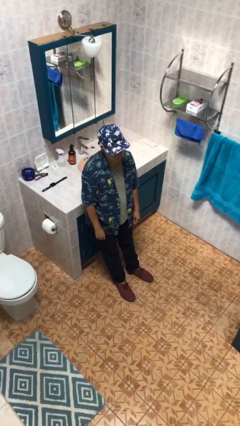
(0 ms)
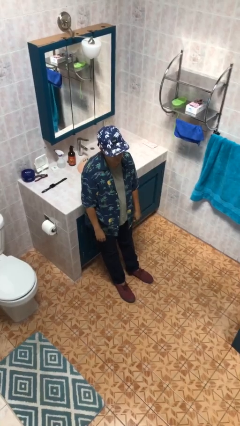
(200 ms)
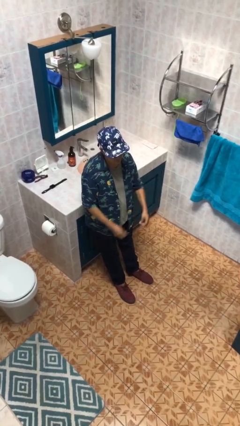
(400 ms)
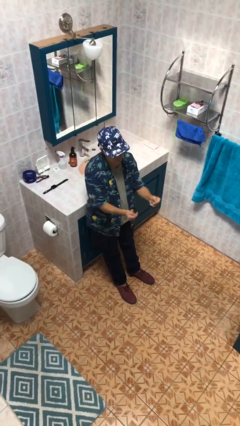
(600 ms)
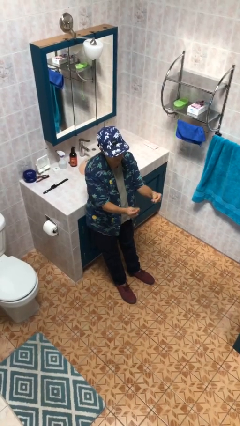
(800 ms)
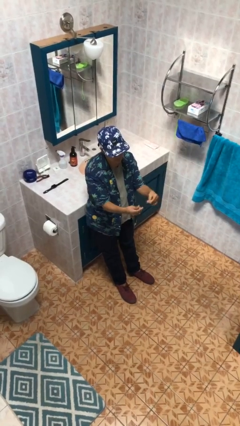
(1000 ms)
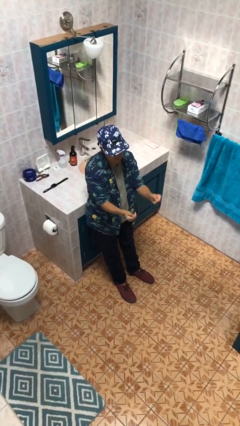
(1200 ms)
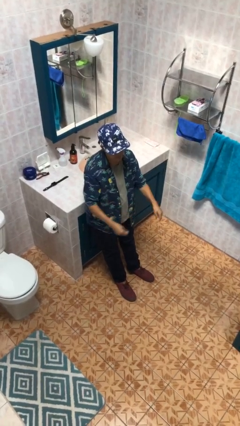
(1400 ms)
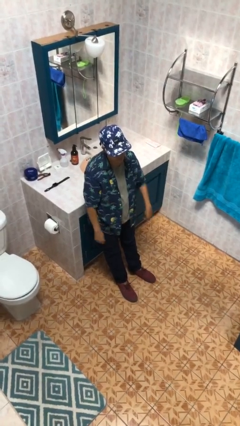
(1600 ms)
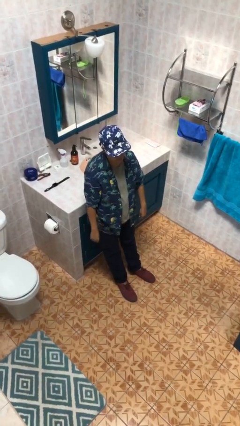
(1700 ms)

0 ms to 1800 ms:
person snaps fingers

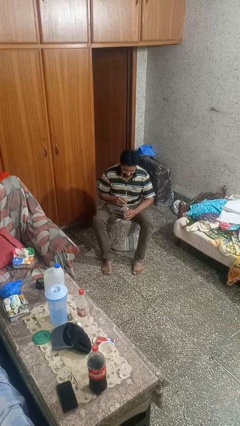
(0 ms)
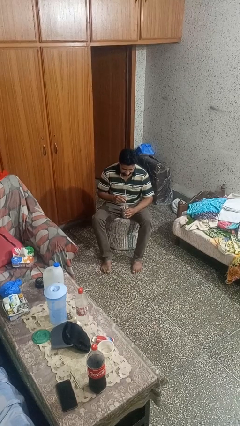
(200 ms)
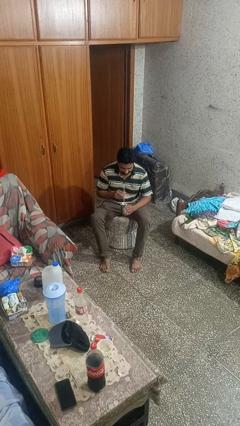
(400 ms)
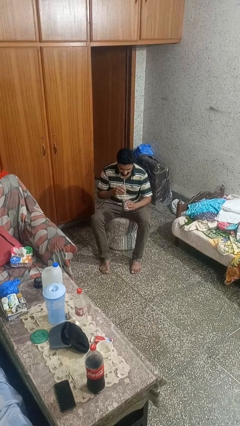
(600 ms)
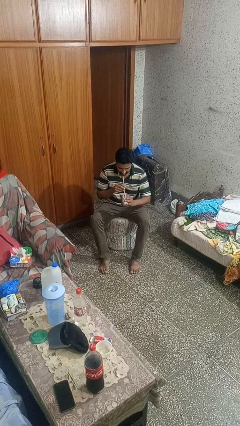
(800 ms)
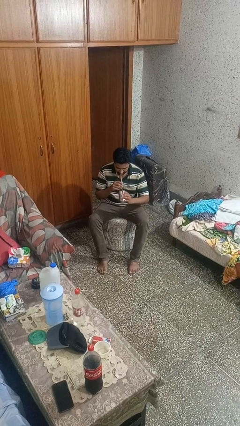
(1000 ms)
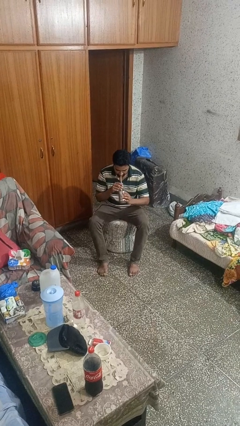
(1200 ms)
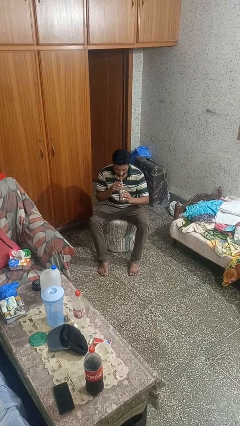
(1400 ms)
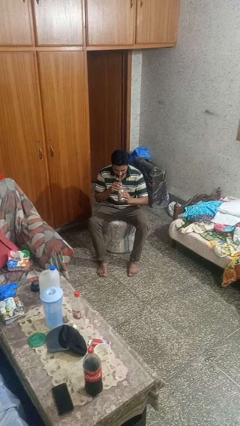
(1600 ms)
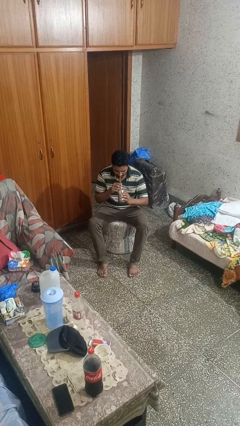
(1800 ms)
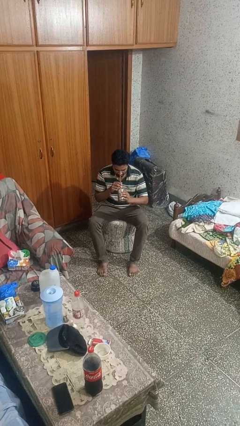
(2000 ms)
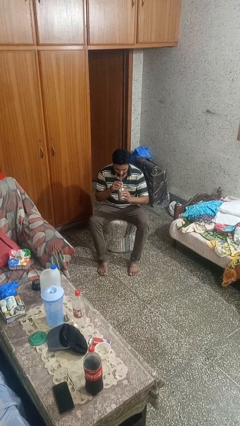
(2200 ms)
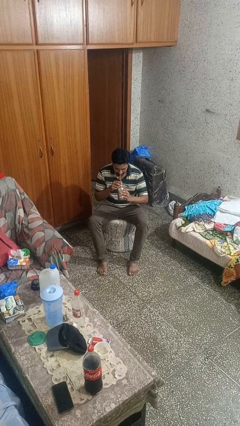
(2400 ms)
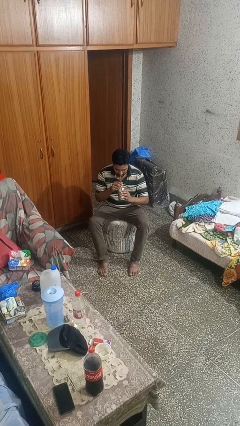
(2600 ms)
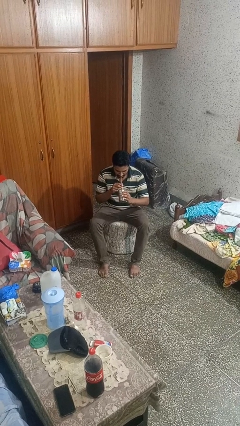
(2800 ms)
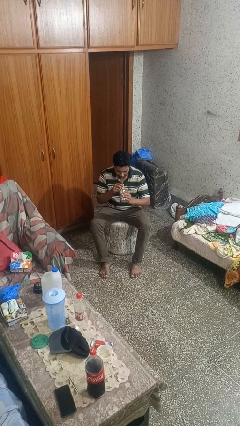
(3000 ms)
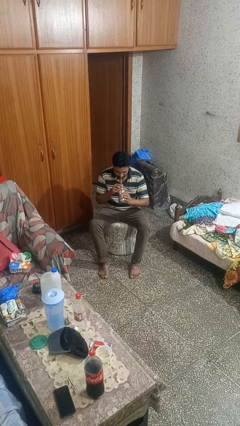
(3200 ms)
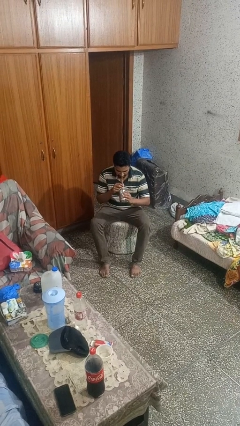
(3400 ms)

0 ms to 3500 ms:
person drinks from straw

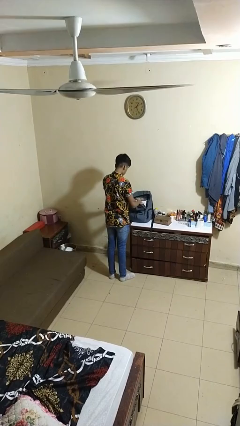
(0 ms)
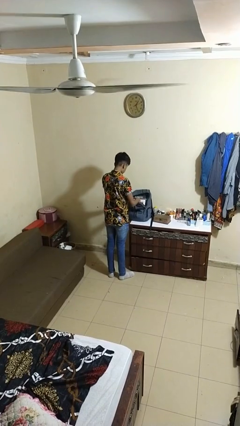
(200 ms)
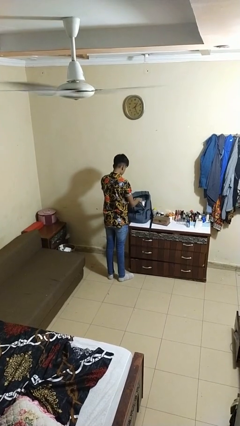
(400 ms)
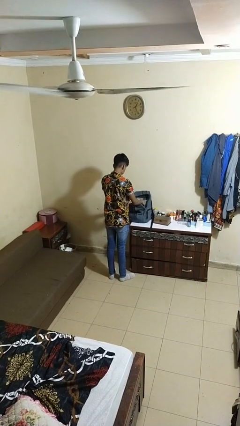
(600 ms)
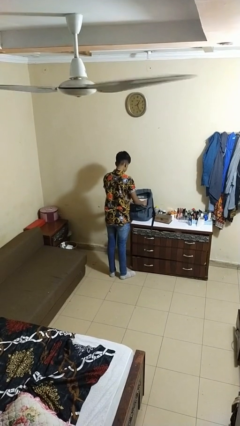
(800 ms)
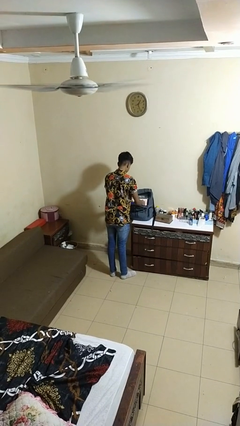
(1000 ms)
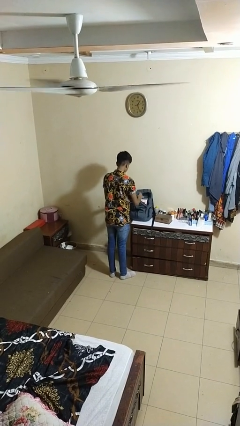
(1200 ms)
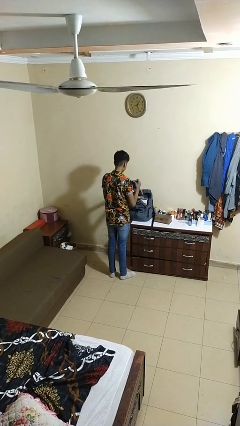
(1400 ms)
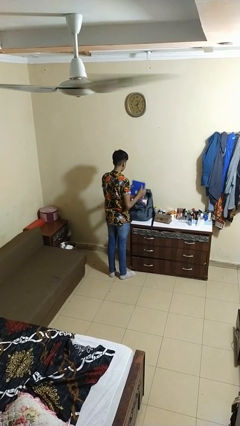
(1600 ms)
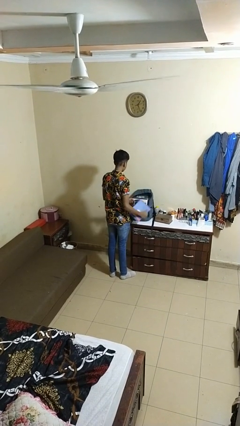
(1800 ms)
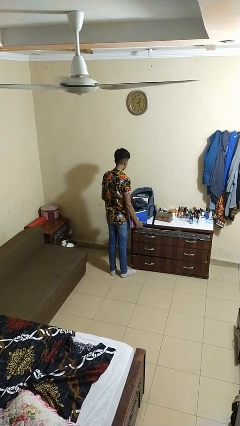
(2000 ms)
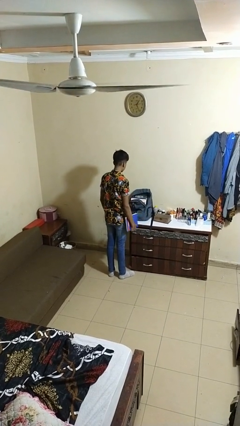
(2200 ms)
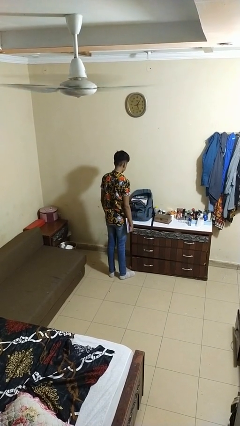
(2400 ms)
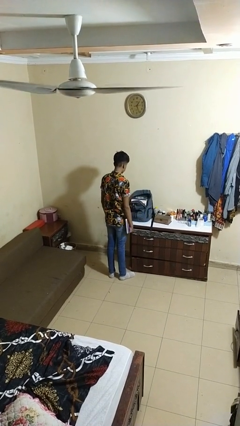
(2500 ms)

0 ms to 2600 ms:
person takes object from backpack

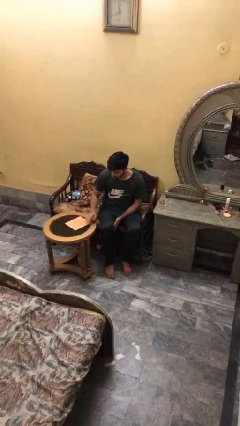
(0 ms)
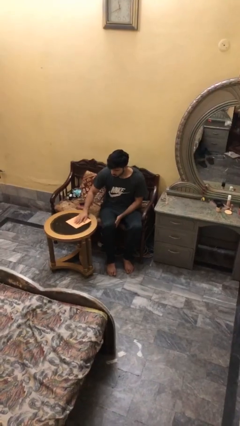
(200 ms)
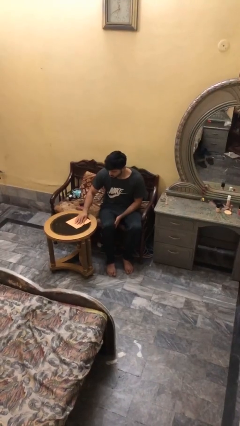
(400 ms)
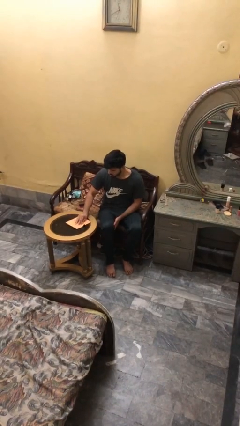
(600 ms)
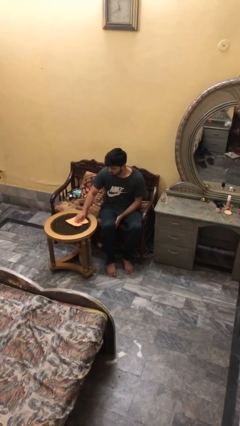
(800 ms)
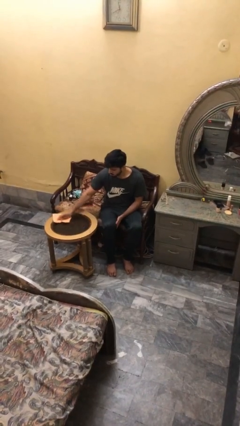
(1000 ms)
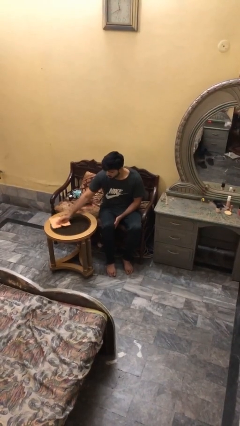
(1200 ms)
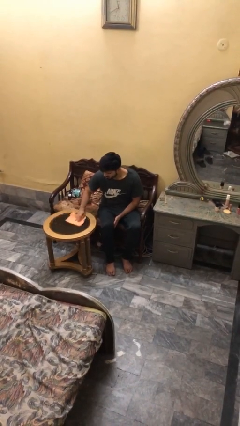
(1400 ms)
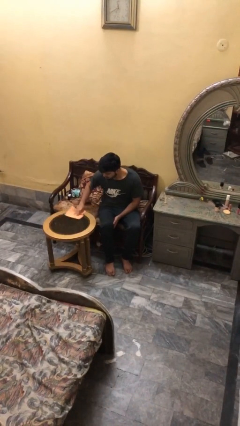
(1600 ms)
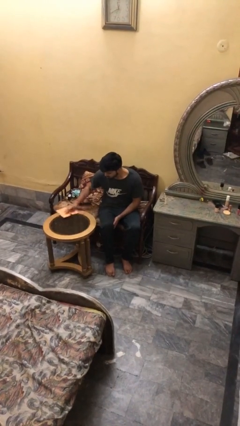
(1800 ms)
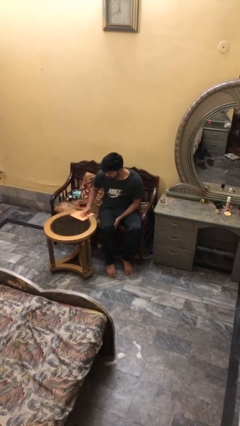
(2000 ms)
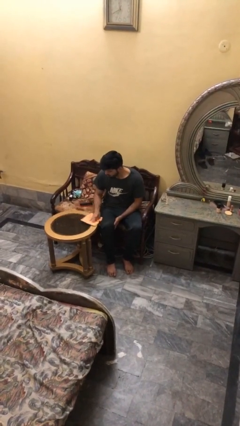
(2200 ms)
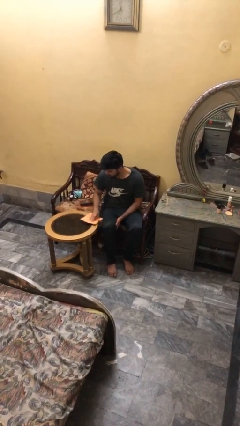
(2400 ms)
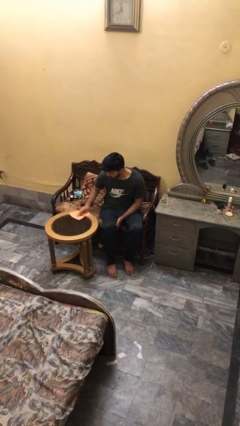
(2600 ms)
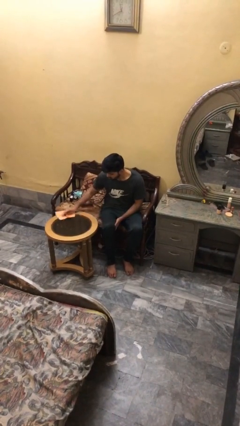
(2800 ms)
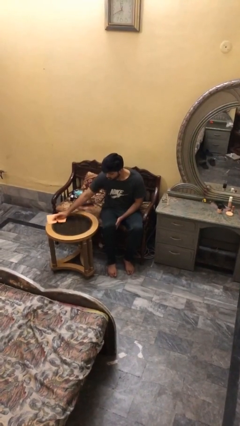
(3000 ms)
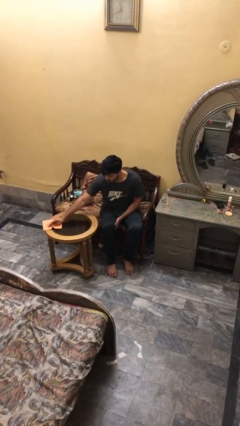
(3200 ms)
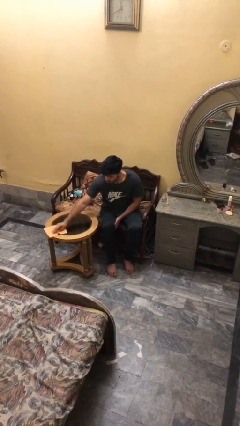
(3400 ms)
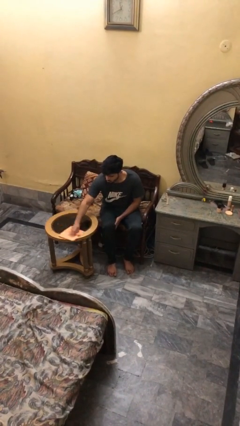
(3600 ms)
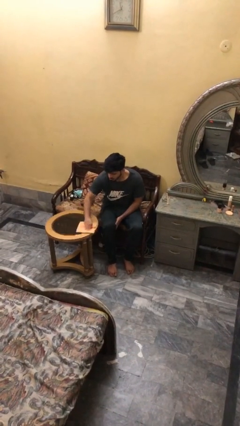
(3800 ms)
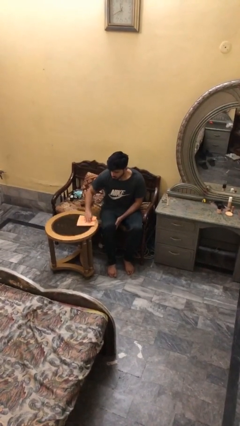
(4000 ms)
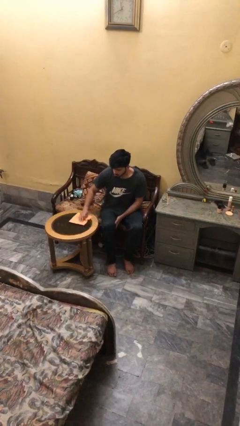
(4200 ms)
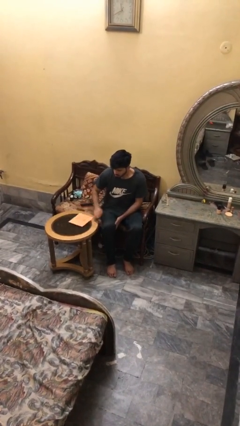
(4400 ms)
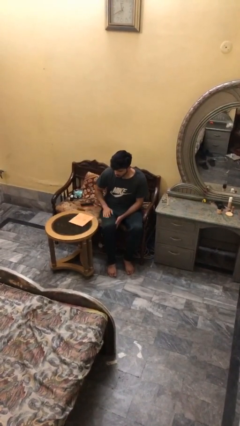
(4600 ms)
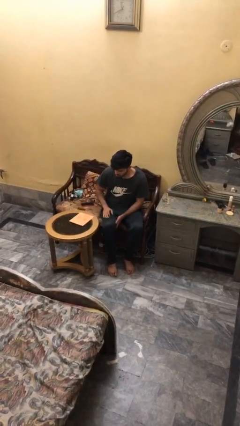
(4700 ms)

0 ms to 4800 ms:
person cleans table with rag

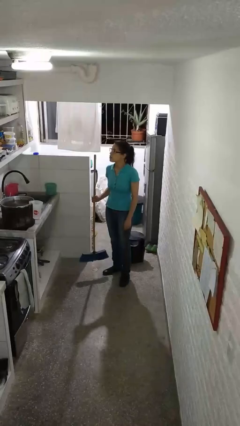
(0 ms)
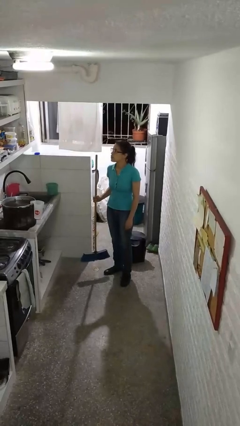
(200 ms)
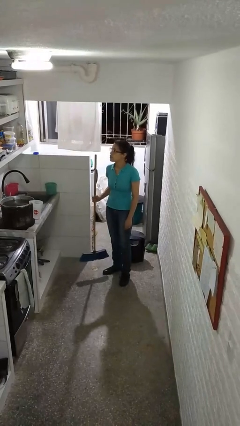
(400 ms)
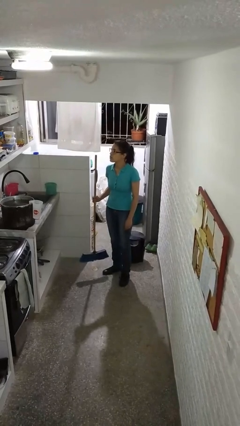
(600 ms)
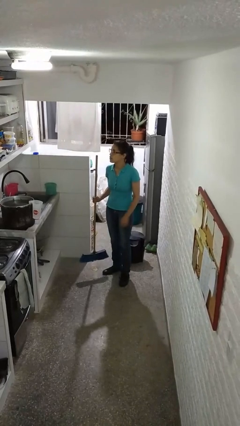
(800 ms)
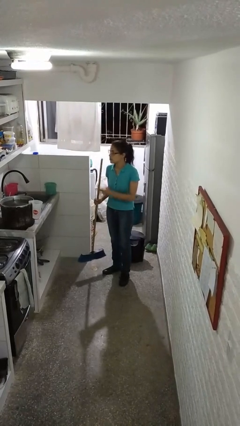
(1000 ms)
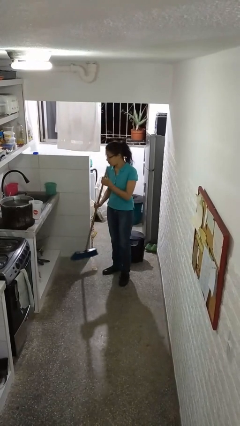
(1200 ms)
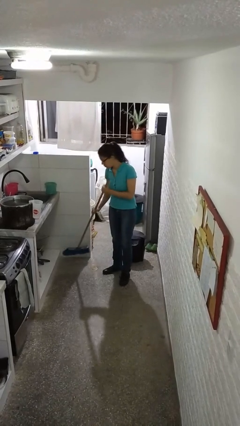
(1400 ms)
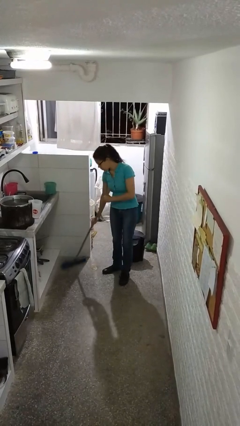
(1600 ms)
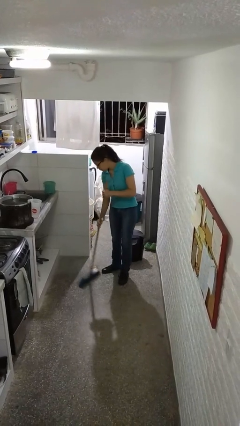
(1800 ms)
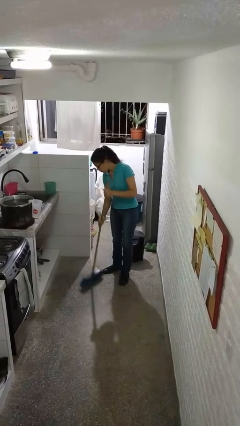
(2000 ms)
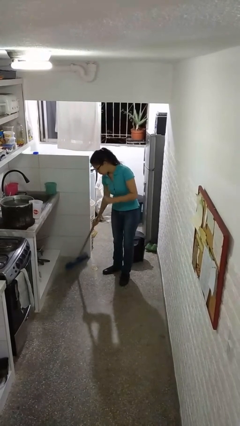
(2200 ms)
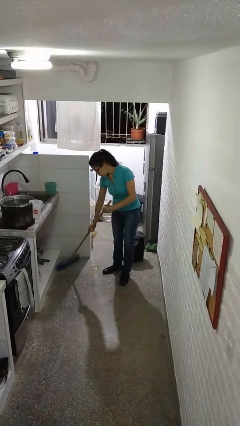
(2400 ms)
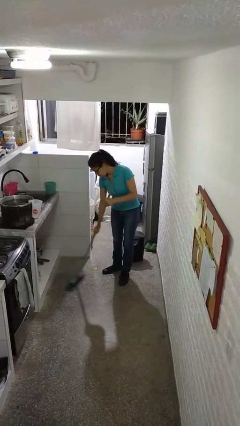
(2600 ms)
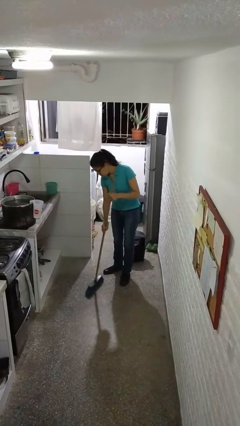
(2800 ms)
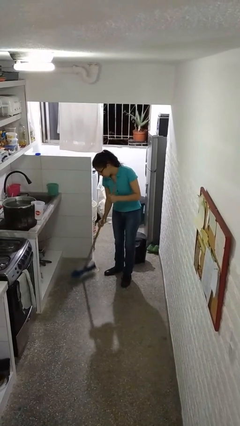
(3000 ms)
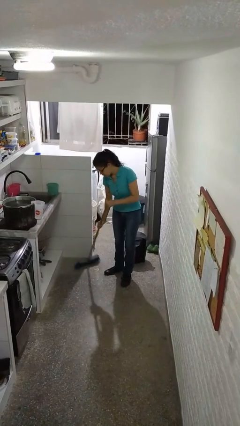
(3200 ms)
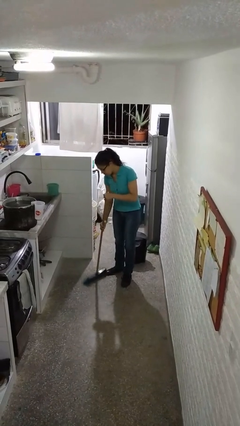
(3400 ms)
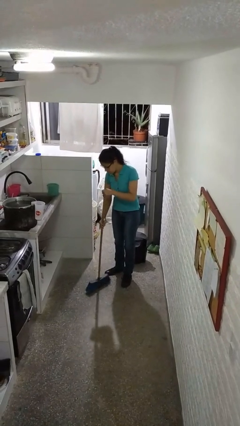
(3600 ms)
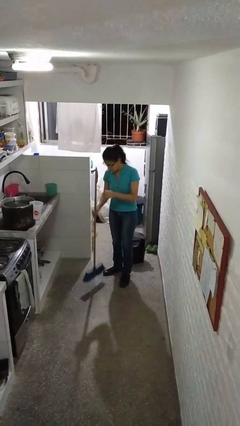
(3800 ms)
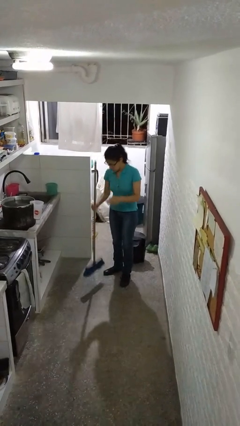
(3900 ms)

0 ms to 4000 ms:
person sweeps floor

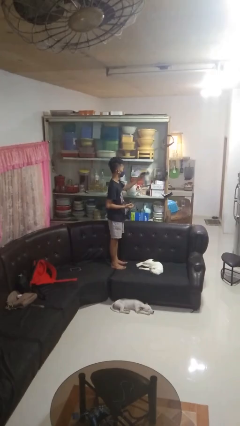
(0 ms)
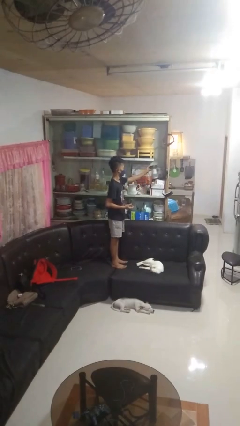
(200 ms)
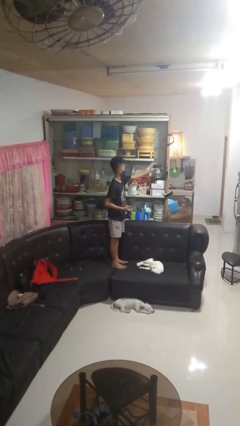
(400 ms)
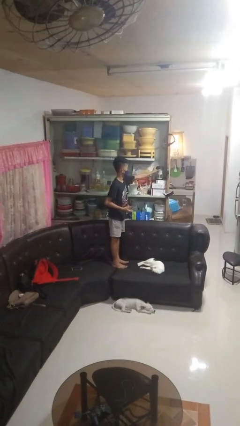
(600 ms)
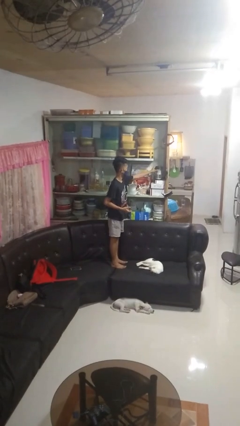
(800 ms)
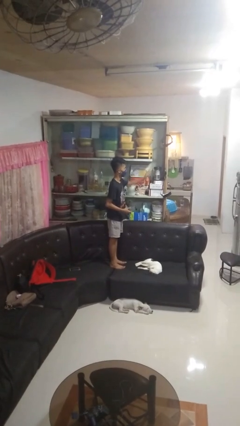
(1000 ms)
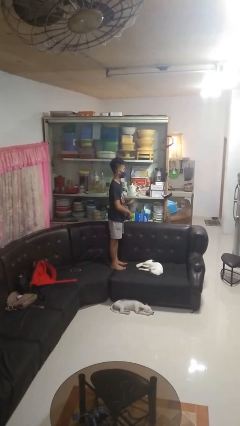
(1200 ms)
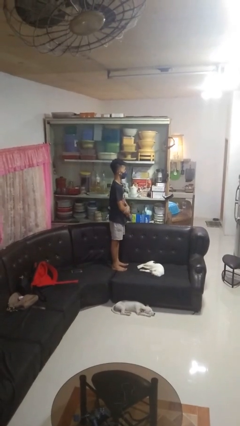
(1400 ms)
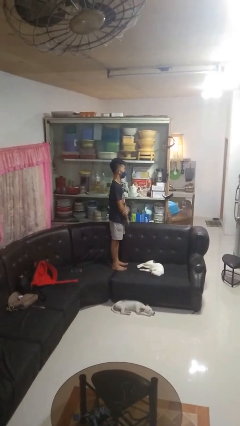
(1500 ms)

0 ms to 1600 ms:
person puts down object into cabinet
